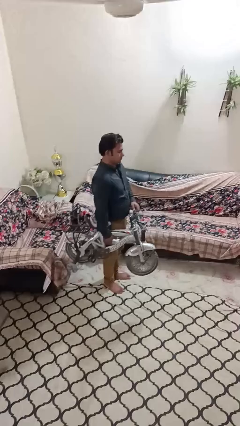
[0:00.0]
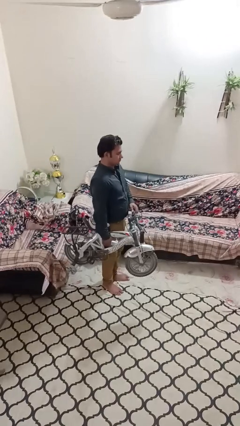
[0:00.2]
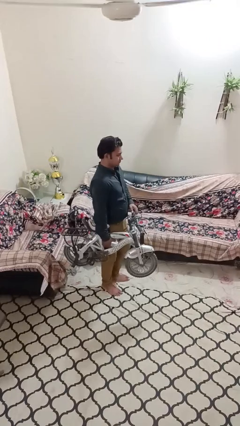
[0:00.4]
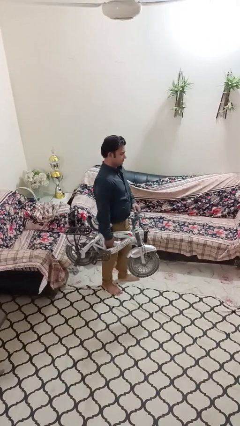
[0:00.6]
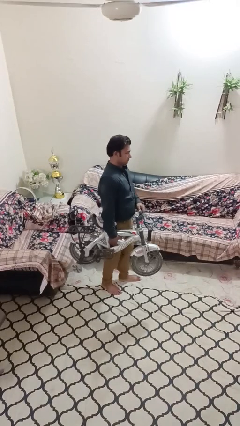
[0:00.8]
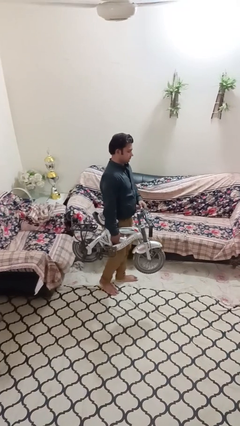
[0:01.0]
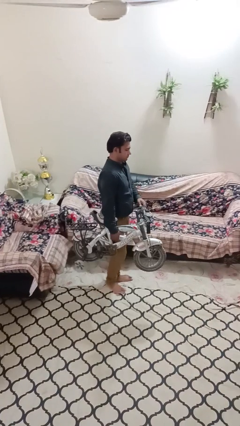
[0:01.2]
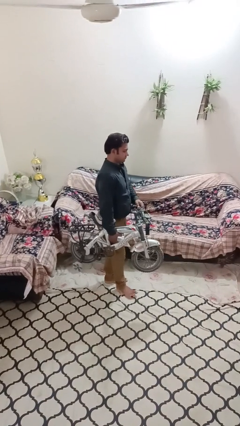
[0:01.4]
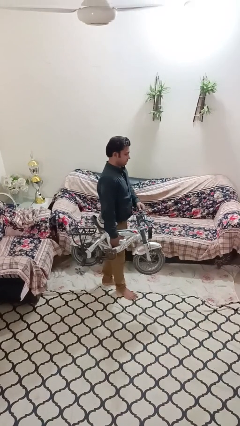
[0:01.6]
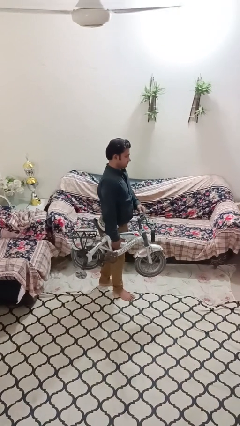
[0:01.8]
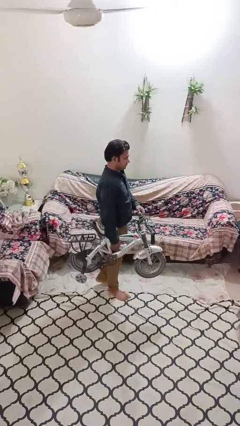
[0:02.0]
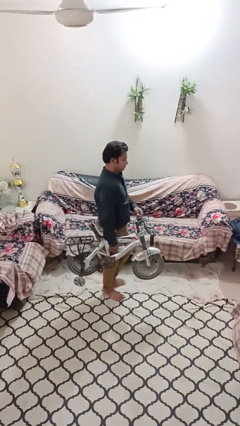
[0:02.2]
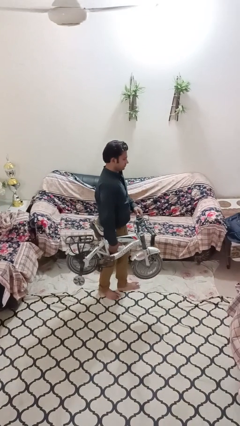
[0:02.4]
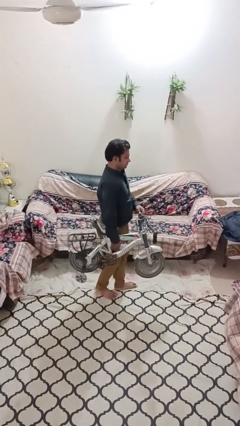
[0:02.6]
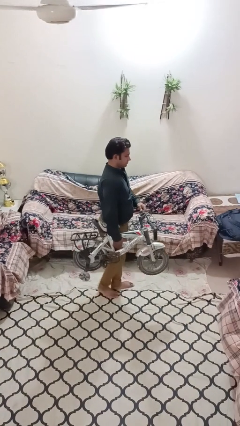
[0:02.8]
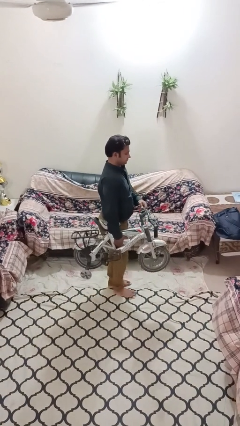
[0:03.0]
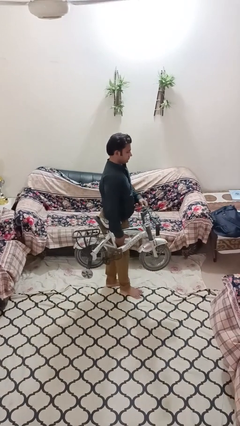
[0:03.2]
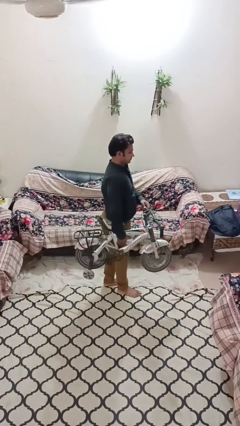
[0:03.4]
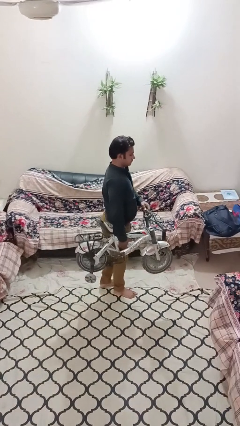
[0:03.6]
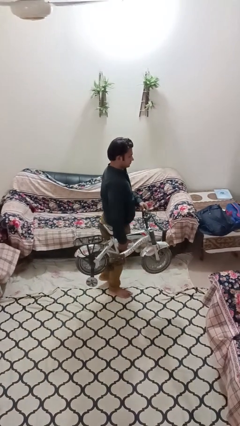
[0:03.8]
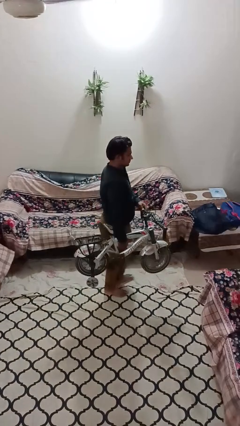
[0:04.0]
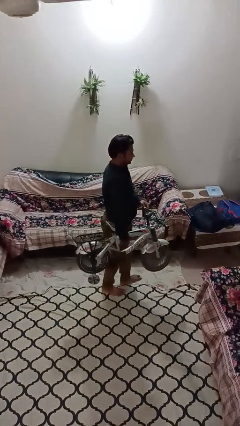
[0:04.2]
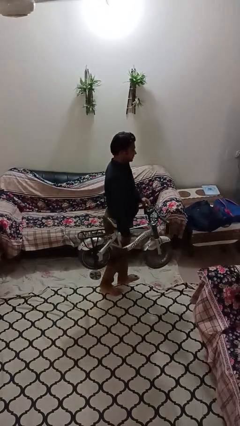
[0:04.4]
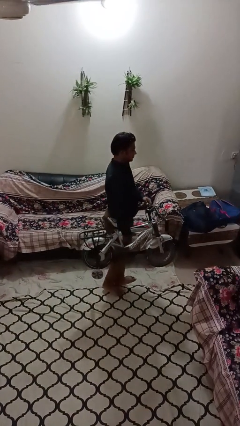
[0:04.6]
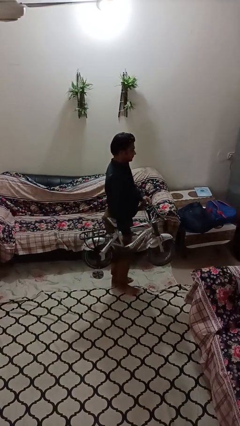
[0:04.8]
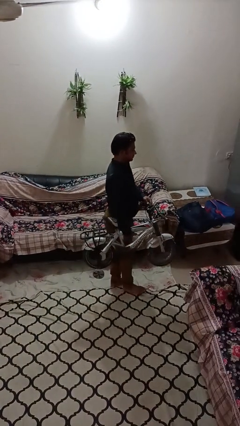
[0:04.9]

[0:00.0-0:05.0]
person carries bicycle

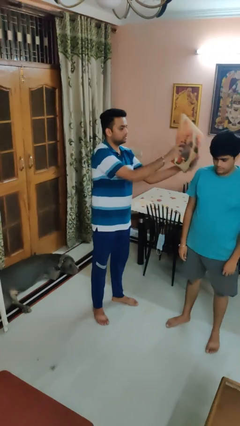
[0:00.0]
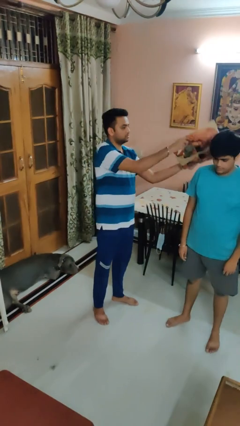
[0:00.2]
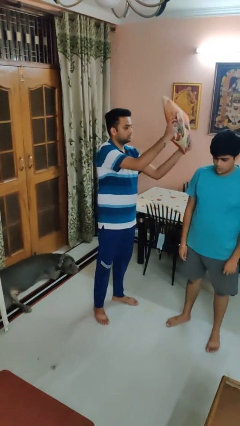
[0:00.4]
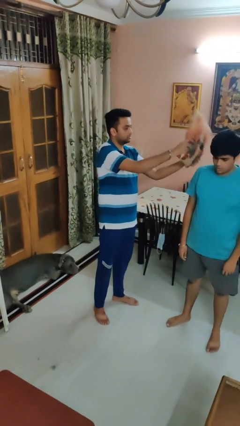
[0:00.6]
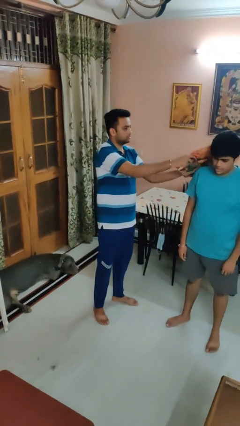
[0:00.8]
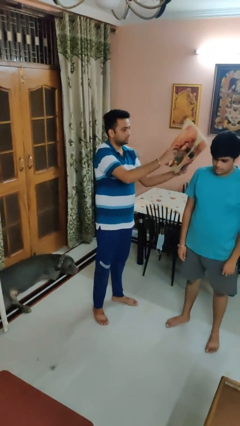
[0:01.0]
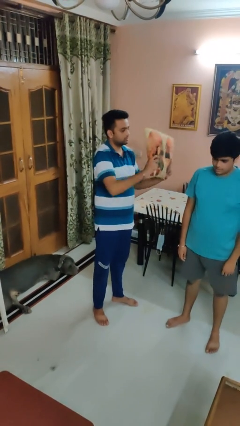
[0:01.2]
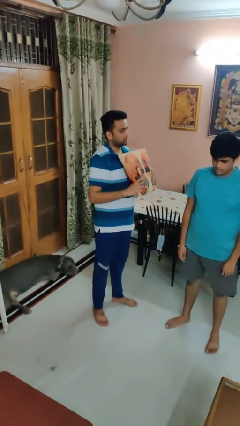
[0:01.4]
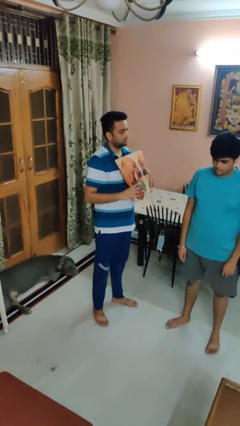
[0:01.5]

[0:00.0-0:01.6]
person hits person with pillow

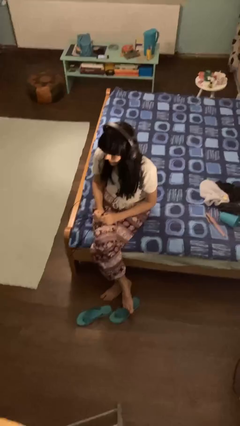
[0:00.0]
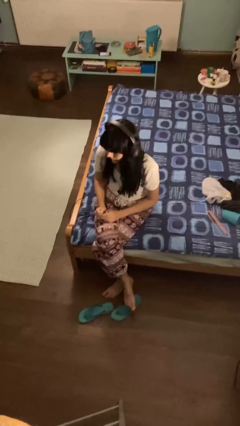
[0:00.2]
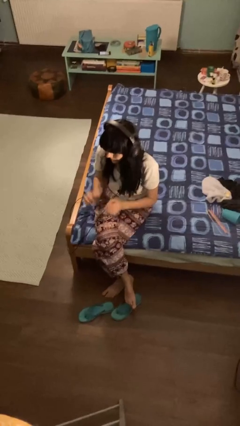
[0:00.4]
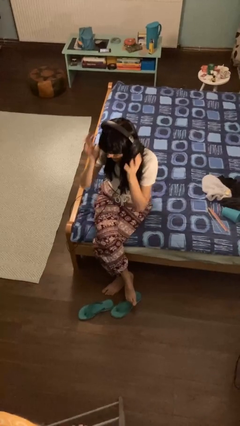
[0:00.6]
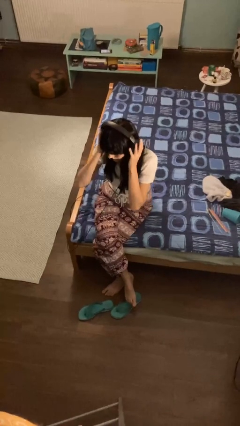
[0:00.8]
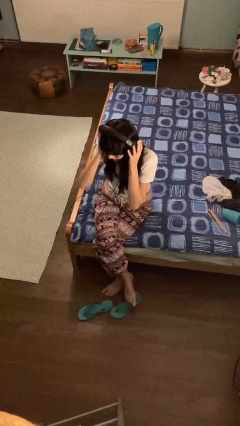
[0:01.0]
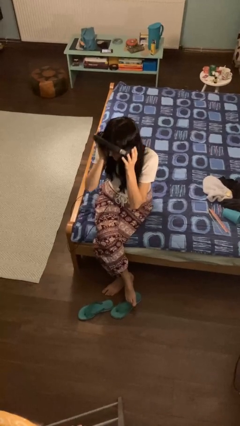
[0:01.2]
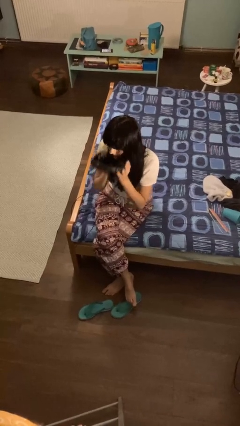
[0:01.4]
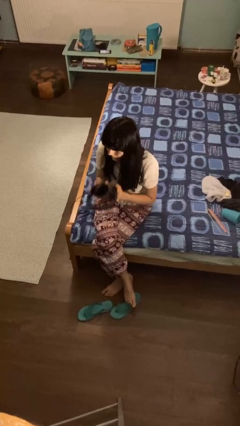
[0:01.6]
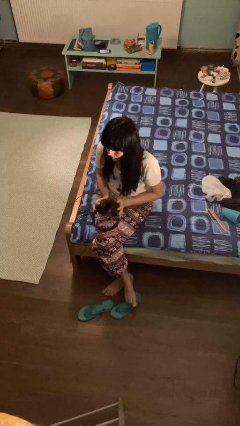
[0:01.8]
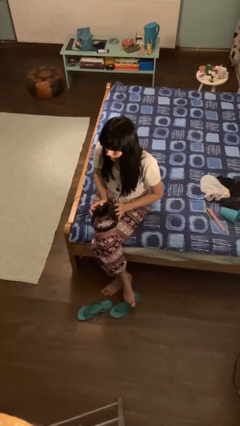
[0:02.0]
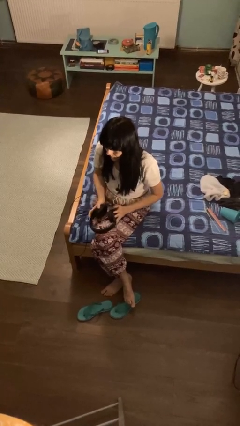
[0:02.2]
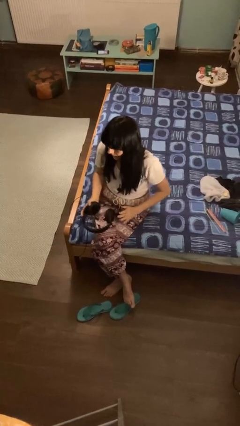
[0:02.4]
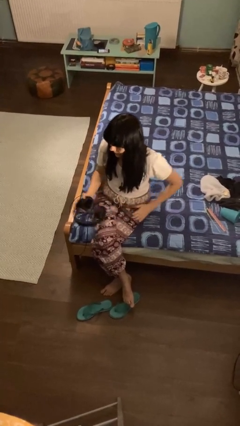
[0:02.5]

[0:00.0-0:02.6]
person takes off headphones

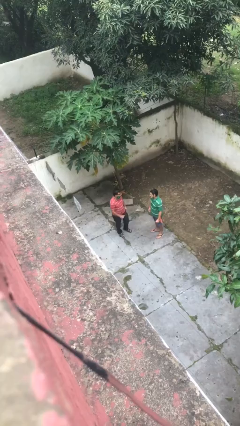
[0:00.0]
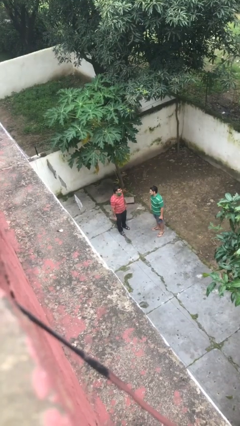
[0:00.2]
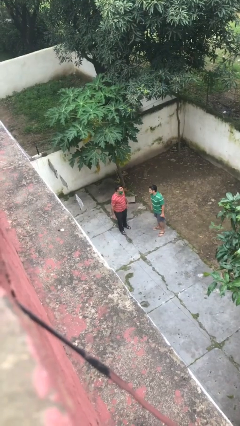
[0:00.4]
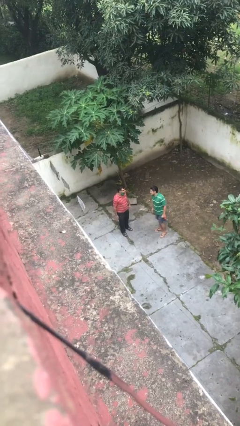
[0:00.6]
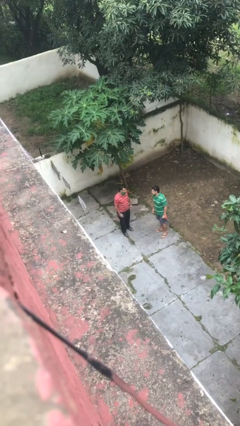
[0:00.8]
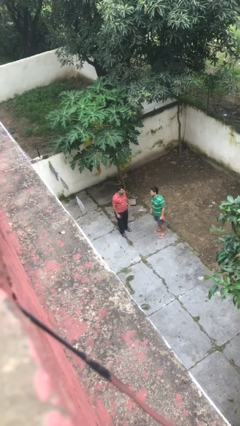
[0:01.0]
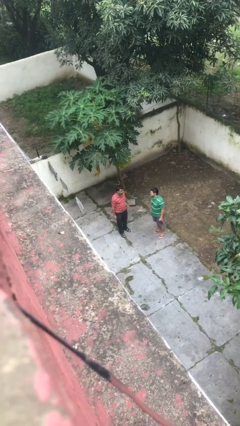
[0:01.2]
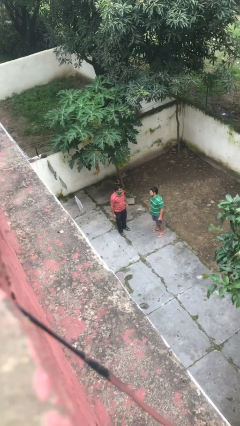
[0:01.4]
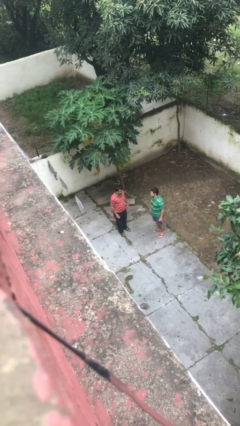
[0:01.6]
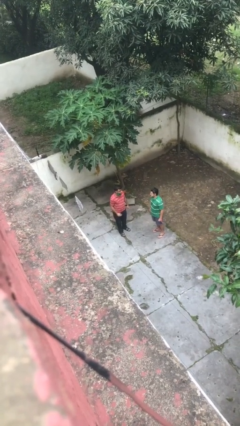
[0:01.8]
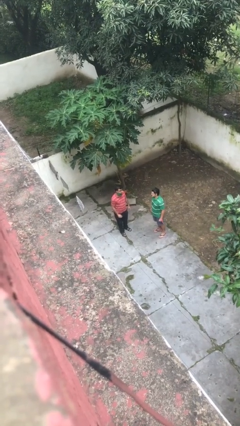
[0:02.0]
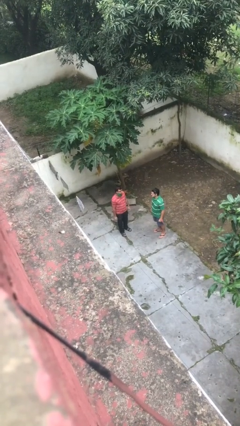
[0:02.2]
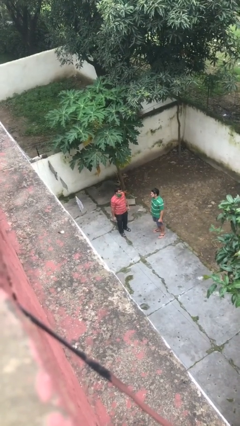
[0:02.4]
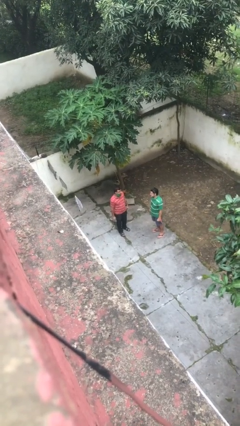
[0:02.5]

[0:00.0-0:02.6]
person talks to person

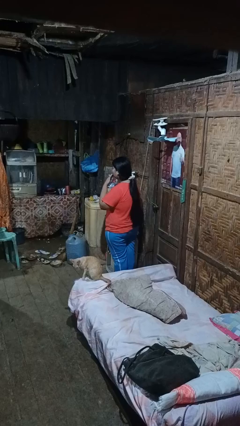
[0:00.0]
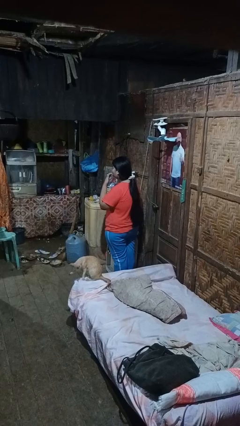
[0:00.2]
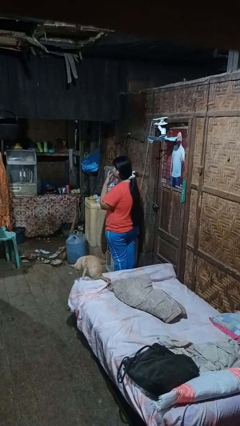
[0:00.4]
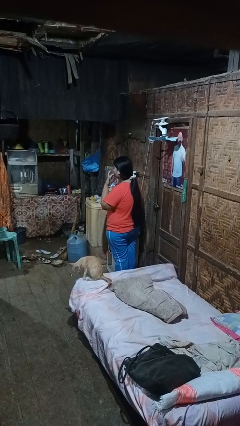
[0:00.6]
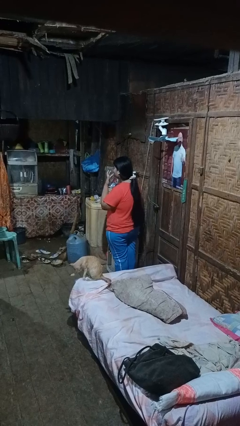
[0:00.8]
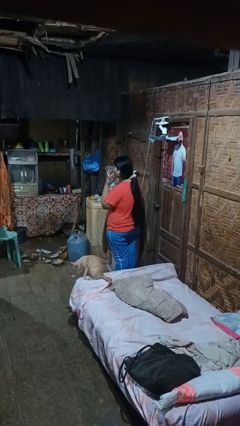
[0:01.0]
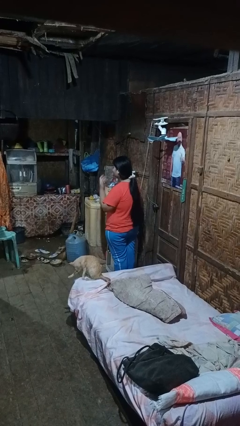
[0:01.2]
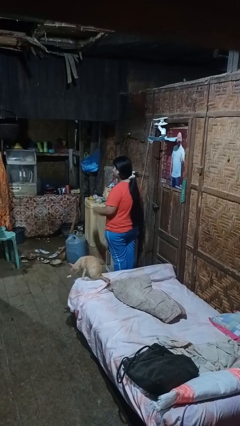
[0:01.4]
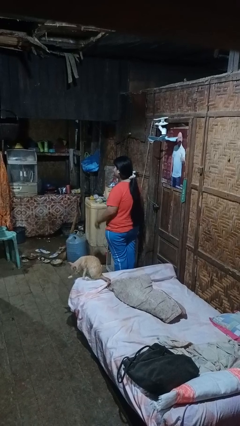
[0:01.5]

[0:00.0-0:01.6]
person licks fingers

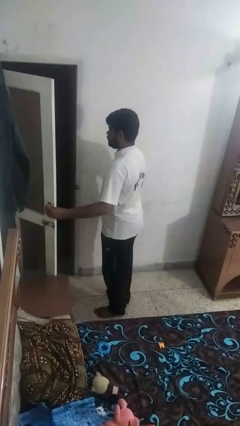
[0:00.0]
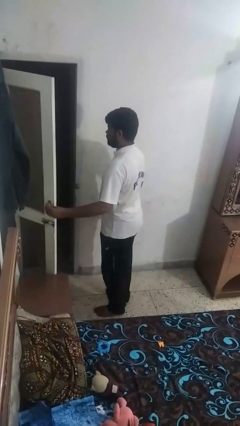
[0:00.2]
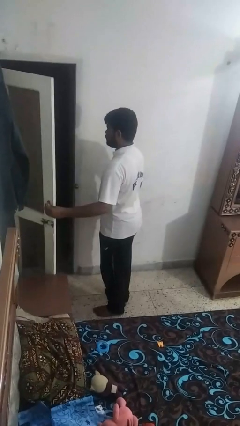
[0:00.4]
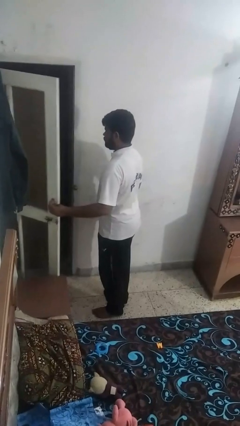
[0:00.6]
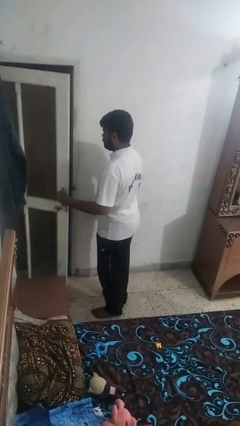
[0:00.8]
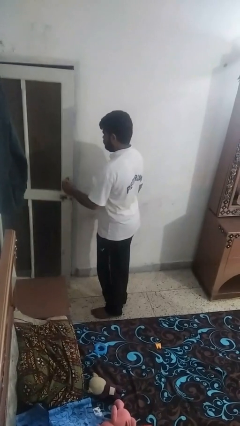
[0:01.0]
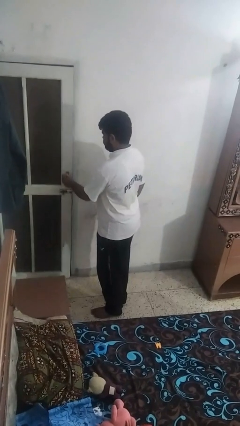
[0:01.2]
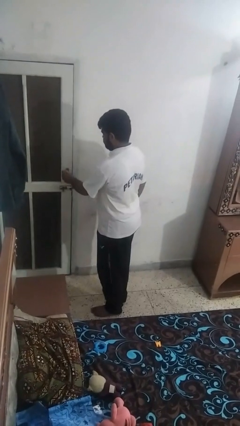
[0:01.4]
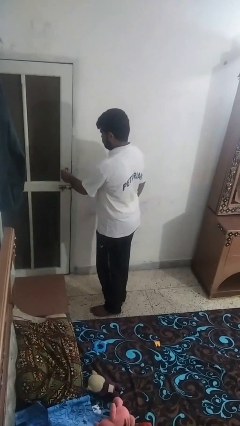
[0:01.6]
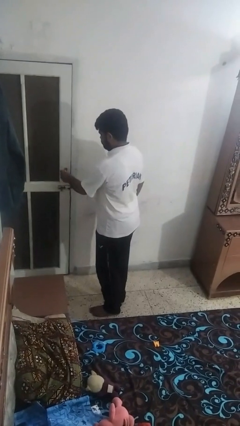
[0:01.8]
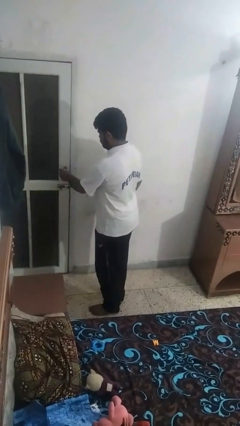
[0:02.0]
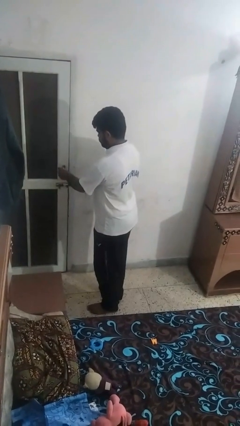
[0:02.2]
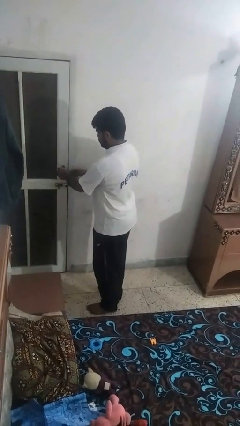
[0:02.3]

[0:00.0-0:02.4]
person closes facility door

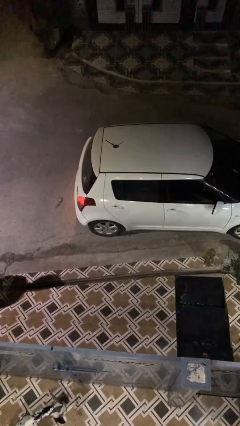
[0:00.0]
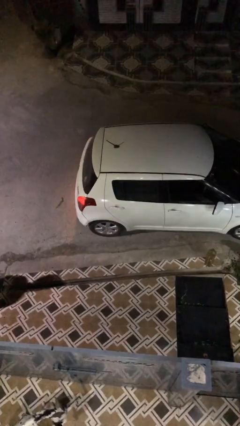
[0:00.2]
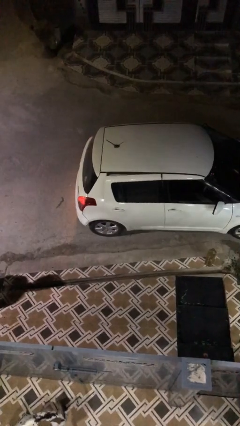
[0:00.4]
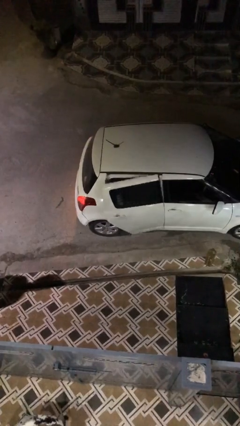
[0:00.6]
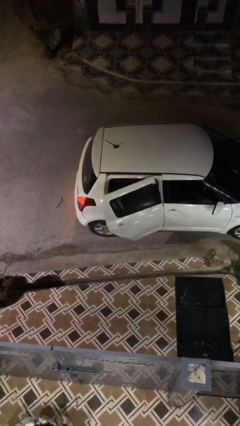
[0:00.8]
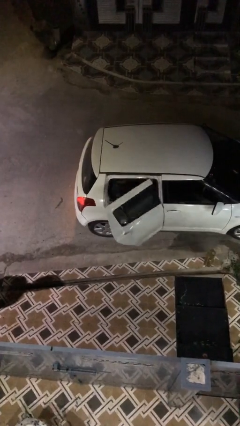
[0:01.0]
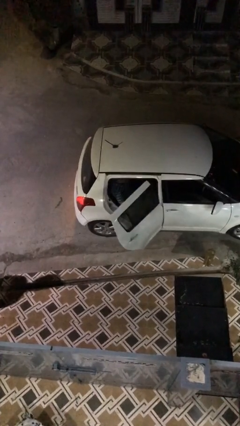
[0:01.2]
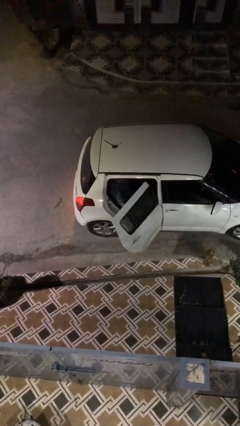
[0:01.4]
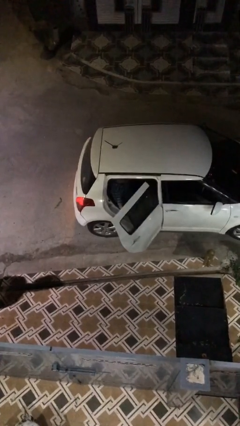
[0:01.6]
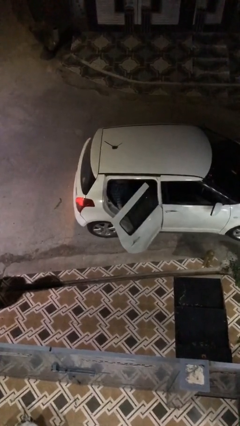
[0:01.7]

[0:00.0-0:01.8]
person opens car door
